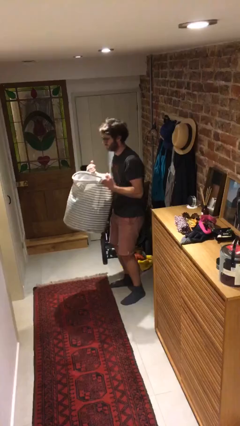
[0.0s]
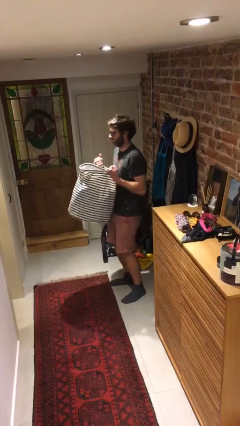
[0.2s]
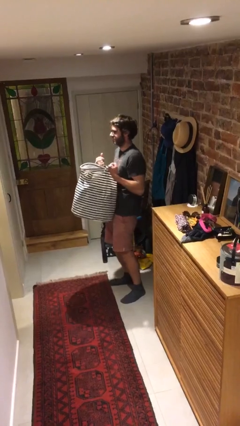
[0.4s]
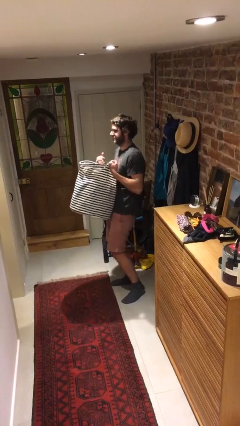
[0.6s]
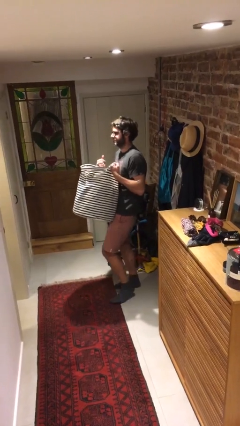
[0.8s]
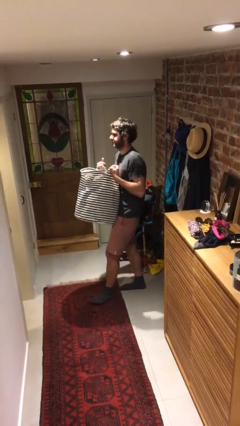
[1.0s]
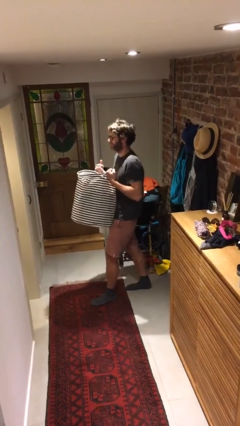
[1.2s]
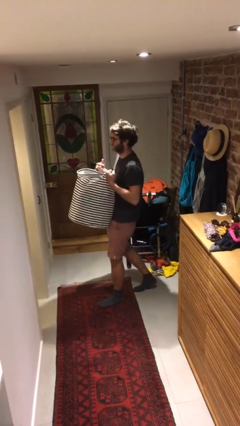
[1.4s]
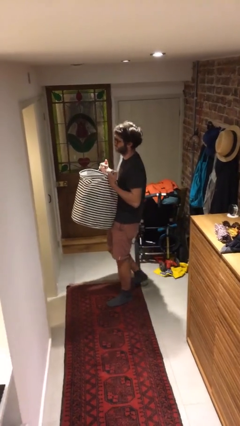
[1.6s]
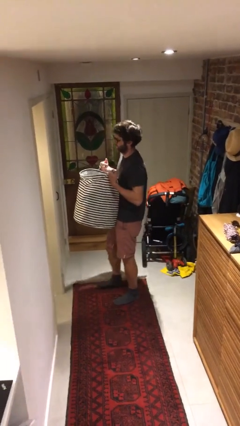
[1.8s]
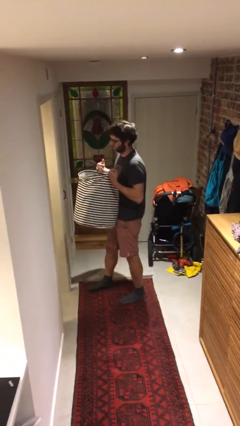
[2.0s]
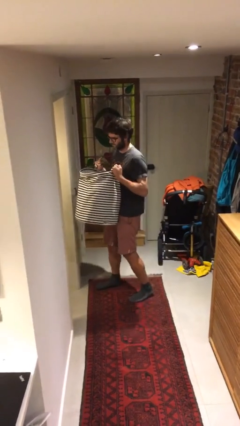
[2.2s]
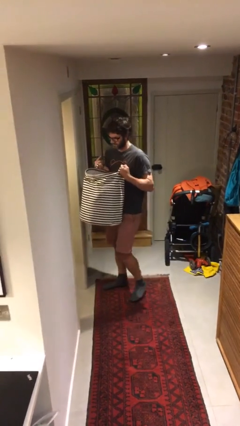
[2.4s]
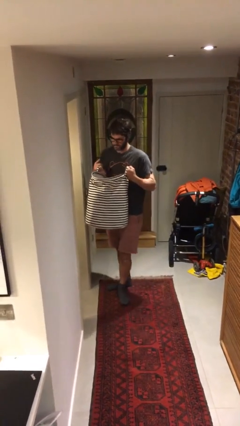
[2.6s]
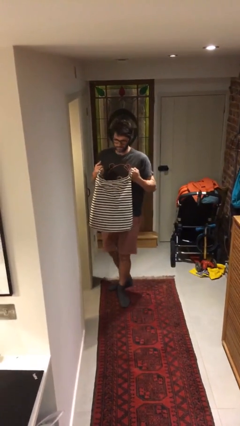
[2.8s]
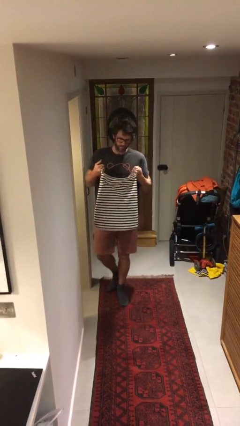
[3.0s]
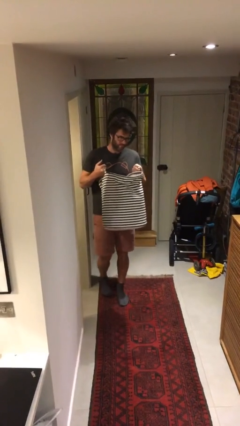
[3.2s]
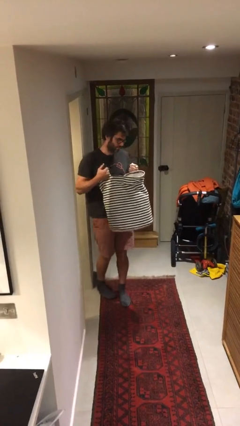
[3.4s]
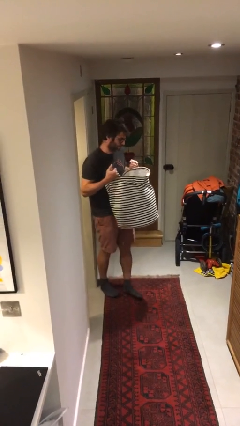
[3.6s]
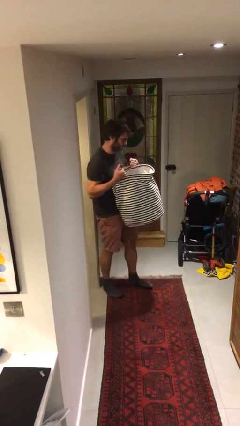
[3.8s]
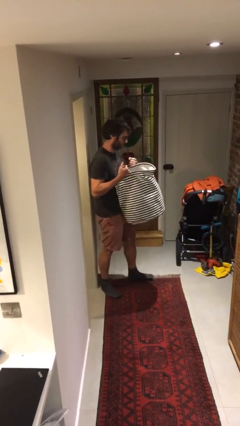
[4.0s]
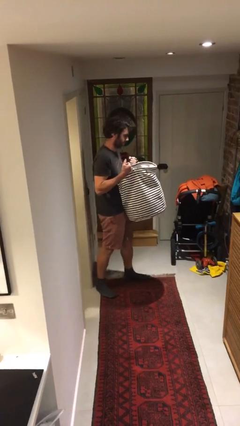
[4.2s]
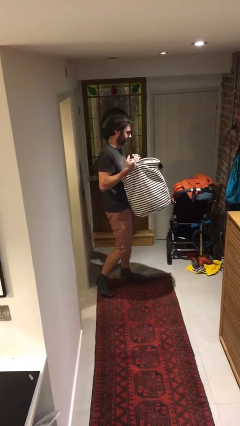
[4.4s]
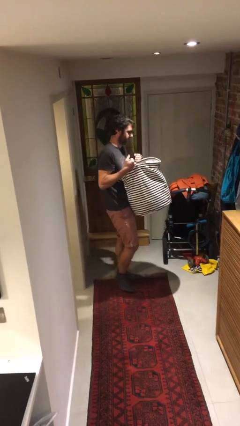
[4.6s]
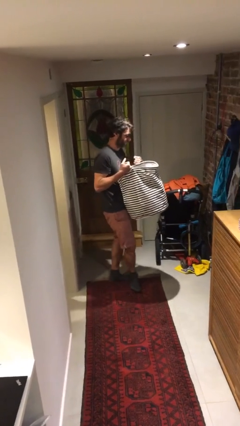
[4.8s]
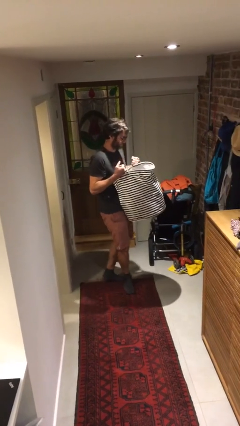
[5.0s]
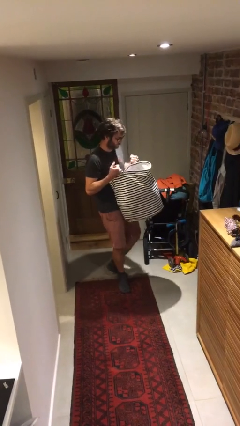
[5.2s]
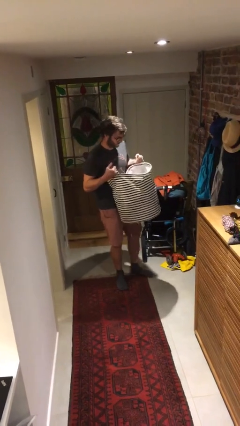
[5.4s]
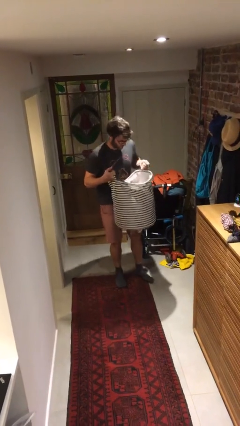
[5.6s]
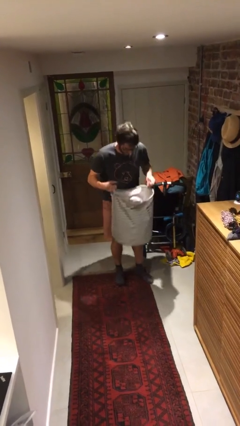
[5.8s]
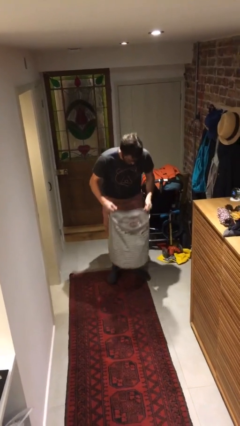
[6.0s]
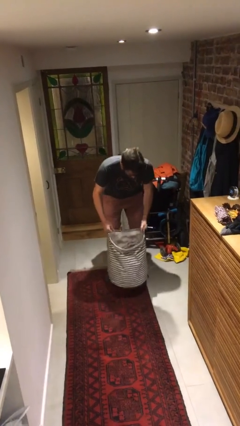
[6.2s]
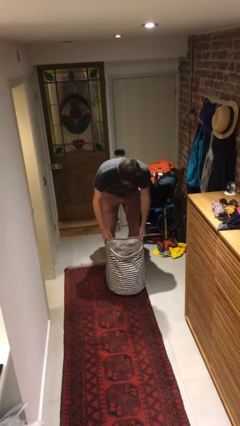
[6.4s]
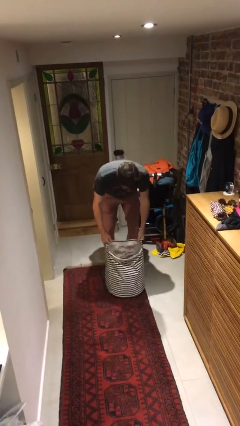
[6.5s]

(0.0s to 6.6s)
person carries heavy object

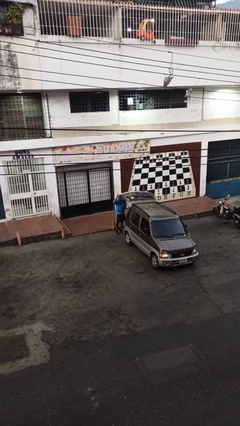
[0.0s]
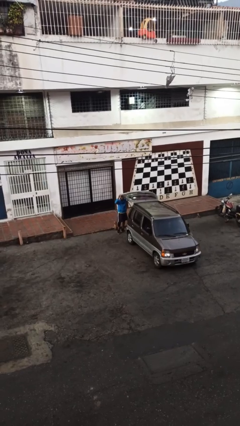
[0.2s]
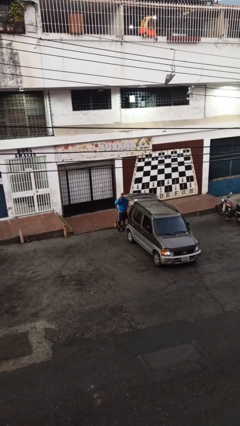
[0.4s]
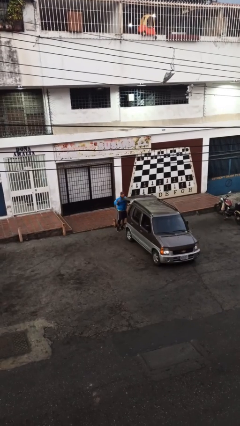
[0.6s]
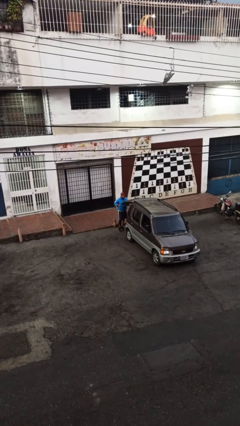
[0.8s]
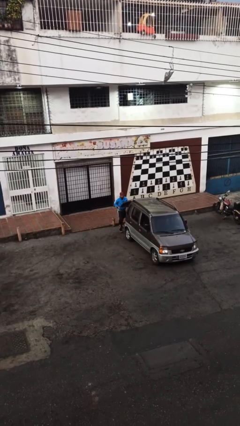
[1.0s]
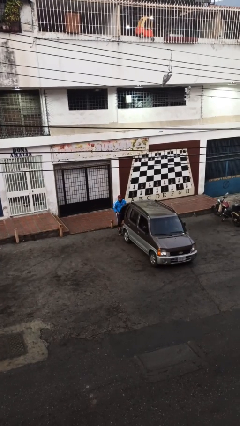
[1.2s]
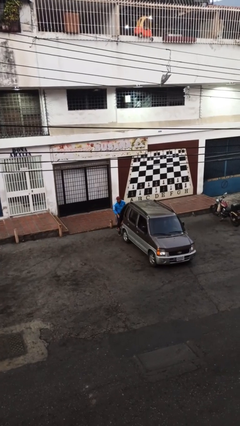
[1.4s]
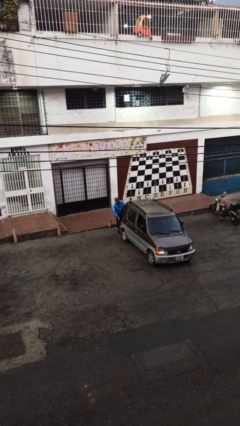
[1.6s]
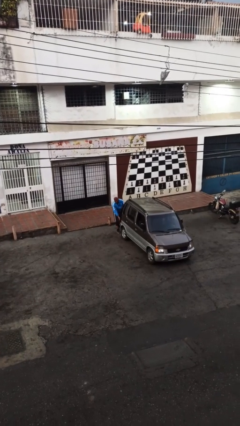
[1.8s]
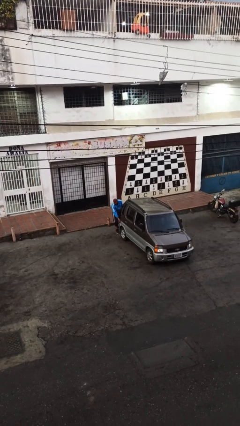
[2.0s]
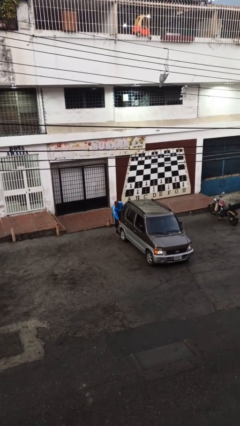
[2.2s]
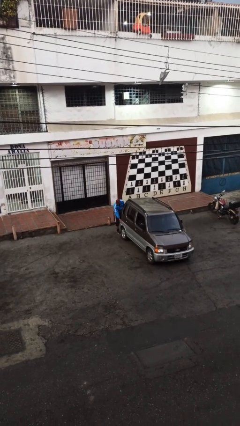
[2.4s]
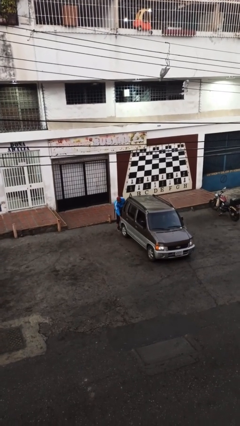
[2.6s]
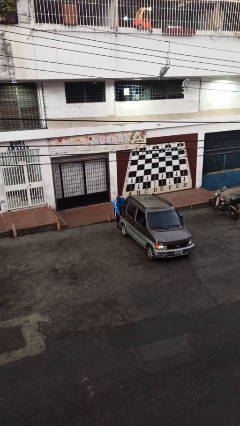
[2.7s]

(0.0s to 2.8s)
person closes car trunk

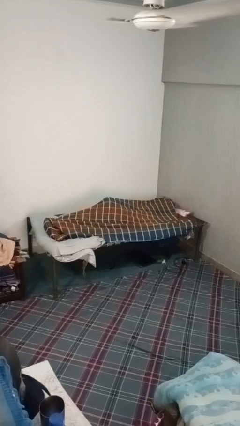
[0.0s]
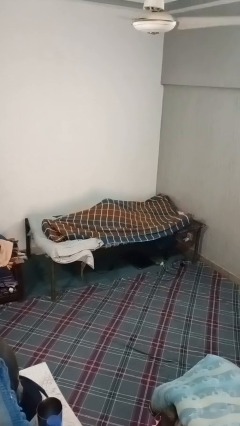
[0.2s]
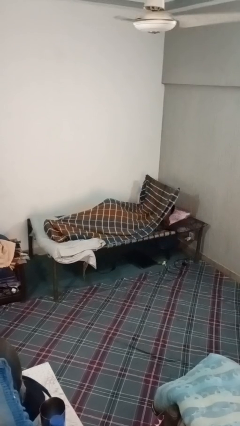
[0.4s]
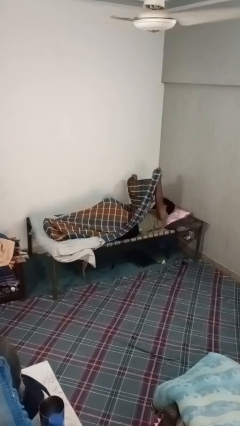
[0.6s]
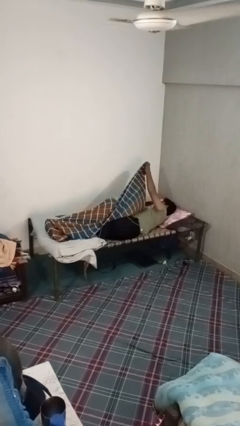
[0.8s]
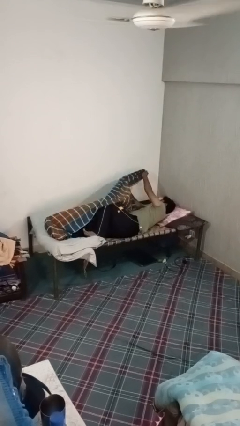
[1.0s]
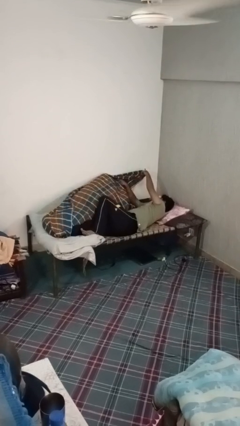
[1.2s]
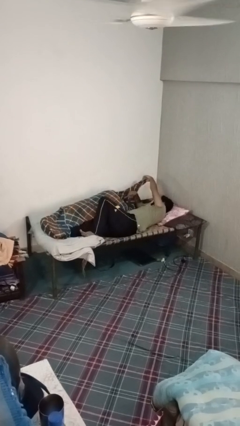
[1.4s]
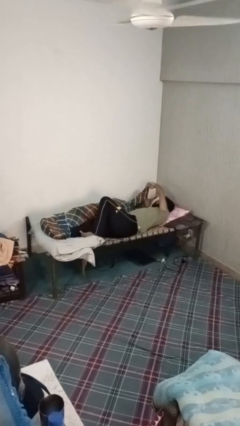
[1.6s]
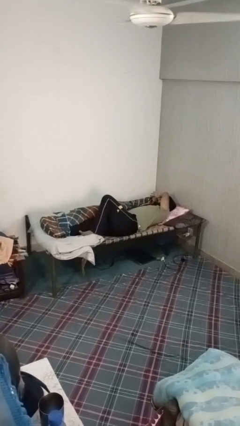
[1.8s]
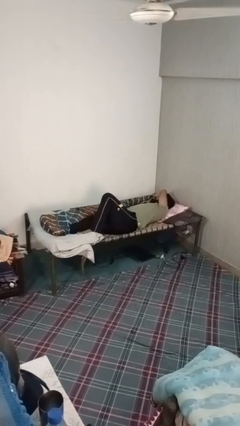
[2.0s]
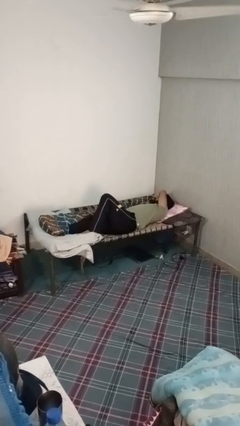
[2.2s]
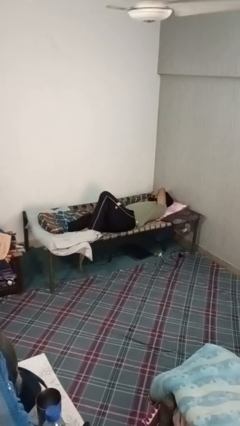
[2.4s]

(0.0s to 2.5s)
person uncovers with bedsheets

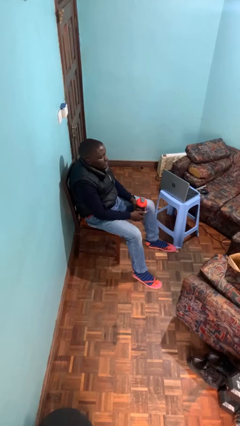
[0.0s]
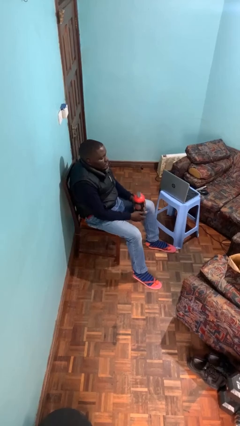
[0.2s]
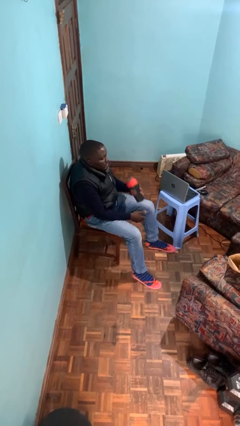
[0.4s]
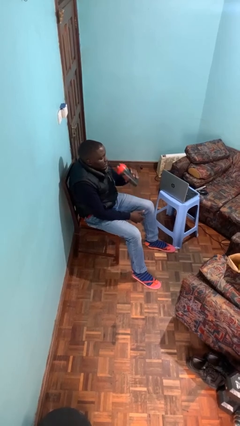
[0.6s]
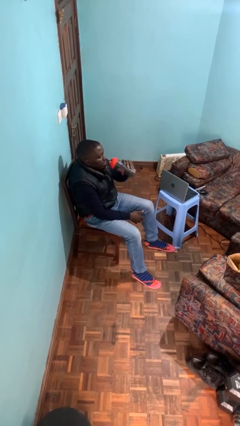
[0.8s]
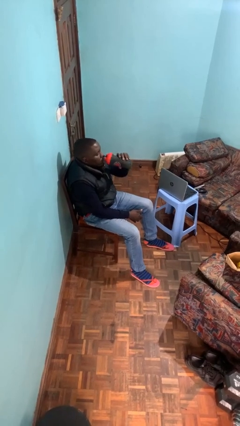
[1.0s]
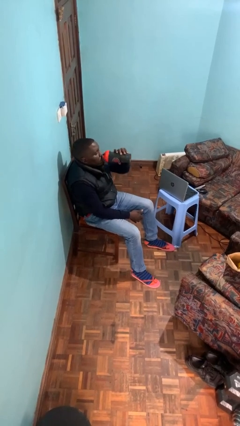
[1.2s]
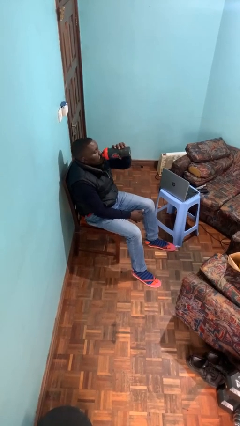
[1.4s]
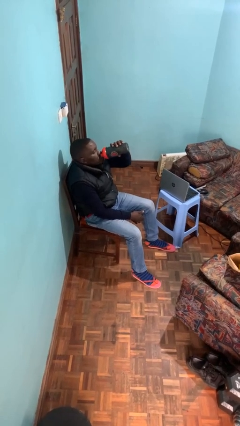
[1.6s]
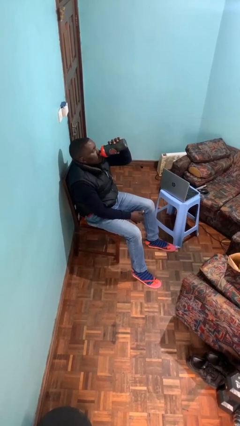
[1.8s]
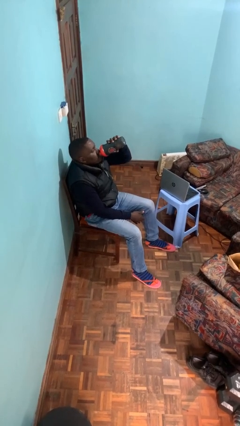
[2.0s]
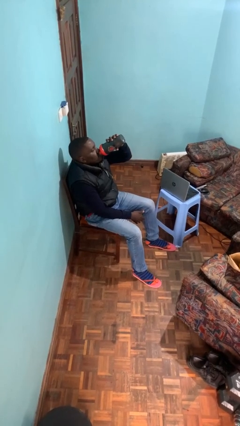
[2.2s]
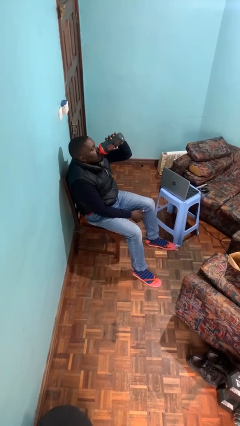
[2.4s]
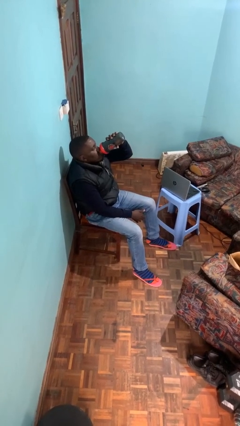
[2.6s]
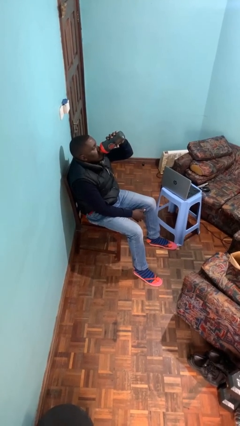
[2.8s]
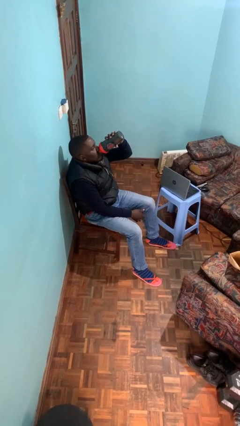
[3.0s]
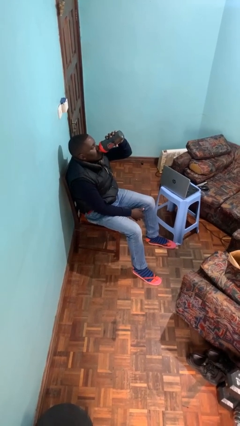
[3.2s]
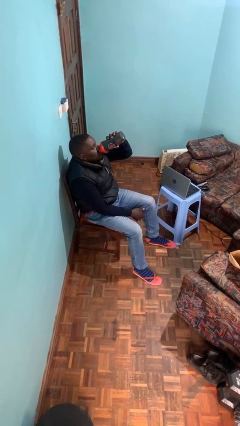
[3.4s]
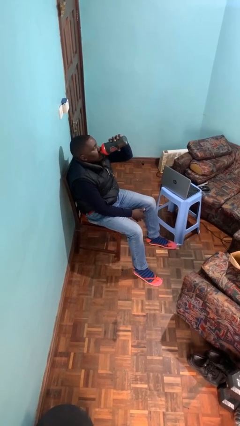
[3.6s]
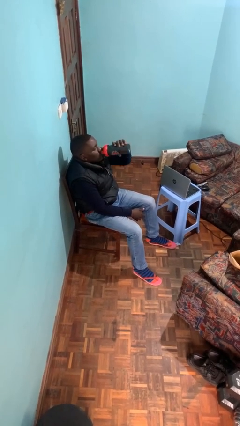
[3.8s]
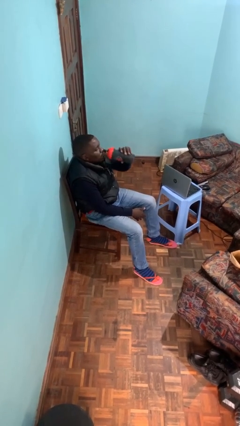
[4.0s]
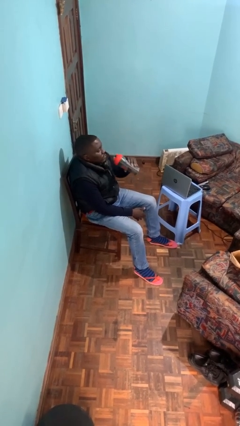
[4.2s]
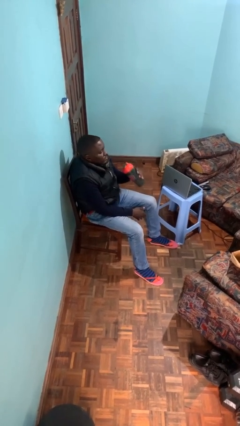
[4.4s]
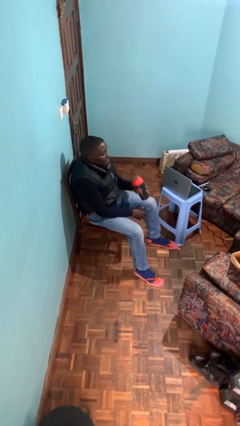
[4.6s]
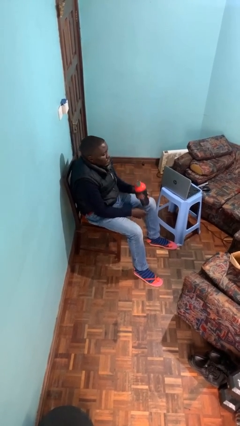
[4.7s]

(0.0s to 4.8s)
person drinks from bottle

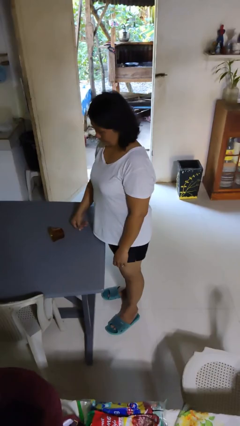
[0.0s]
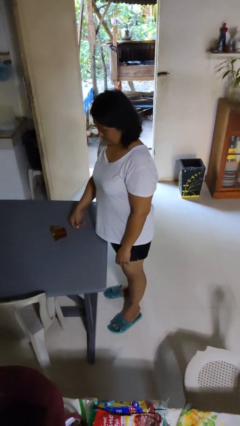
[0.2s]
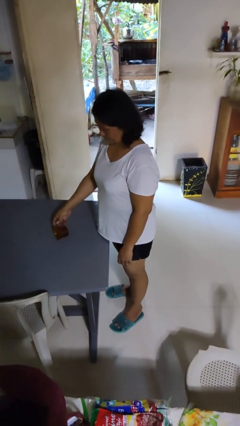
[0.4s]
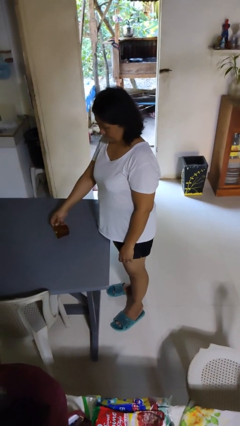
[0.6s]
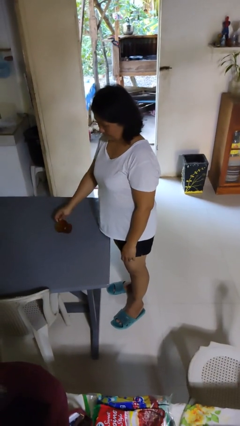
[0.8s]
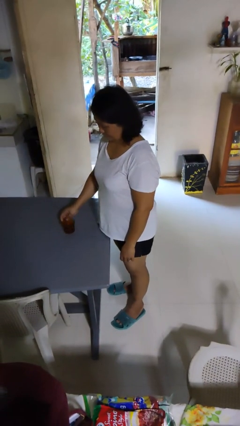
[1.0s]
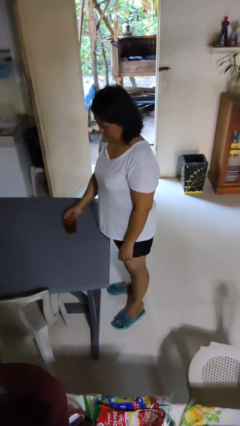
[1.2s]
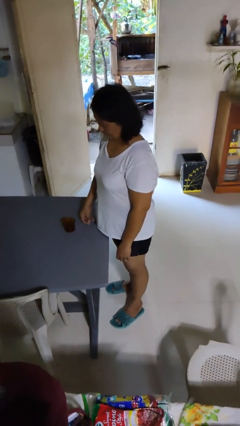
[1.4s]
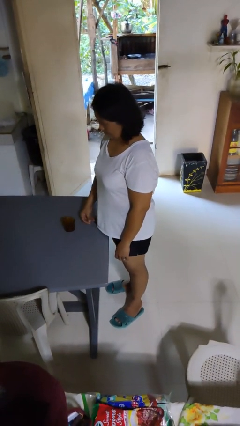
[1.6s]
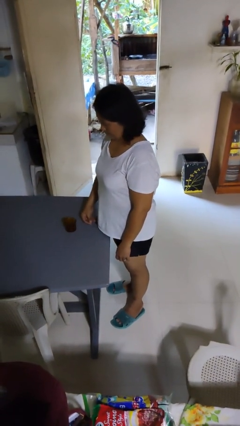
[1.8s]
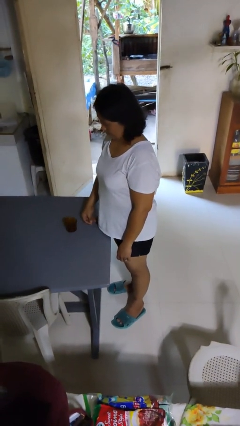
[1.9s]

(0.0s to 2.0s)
person sets upright glass
